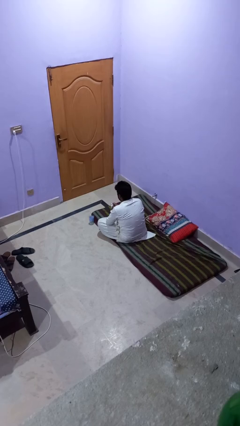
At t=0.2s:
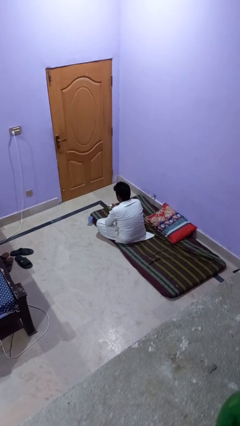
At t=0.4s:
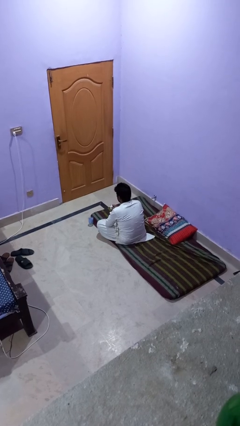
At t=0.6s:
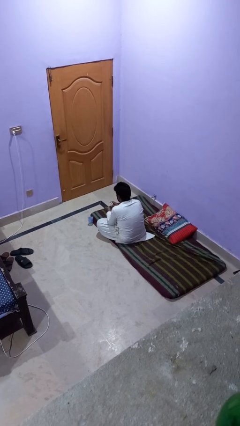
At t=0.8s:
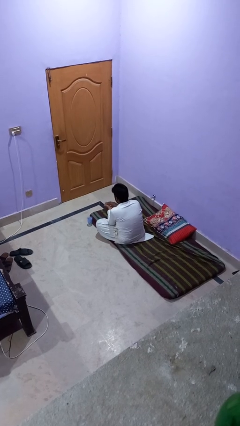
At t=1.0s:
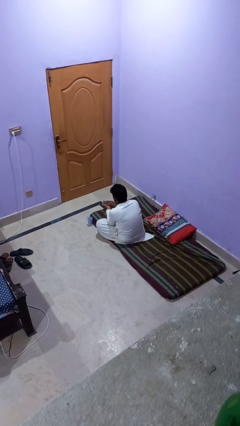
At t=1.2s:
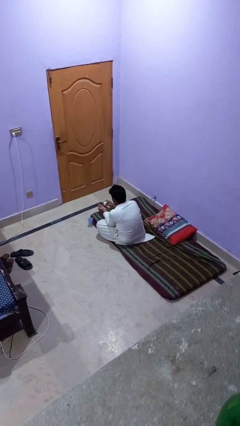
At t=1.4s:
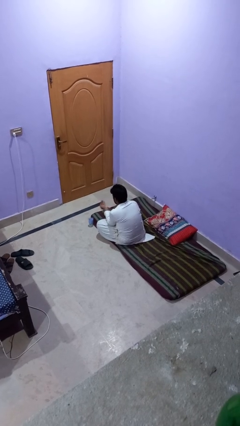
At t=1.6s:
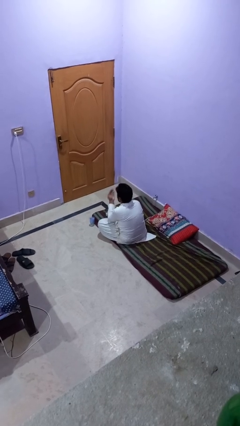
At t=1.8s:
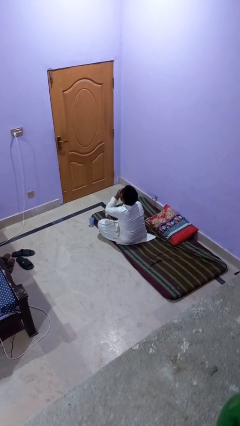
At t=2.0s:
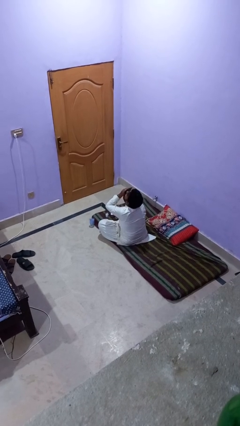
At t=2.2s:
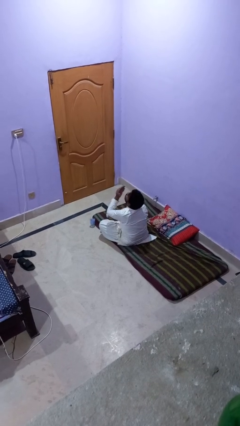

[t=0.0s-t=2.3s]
person takes medicine pills

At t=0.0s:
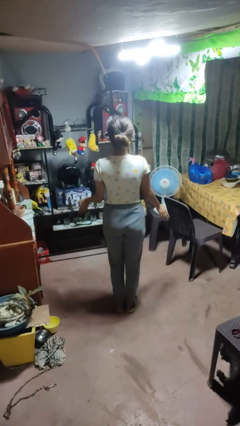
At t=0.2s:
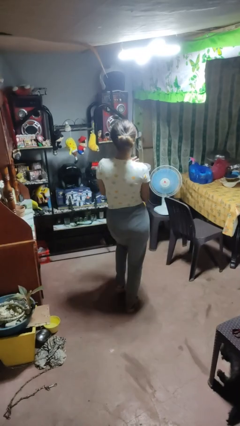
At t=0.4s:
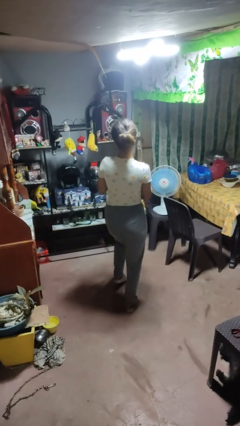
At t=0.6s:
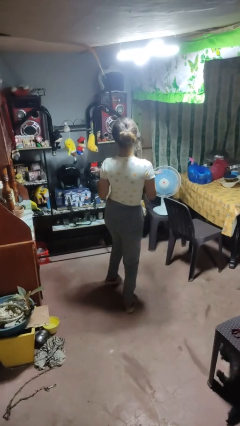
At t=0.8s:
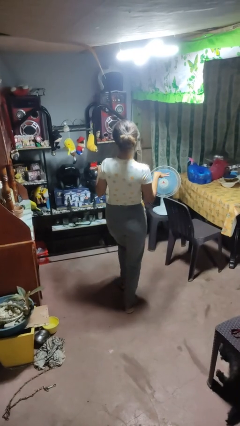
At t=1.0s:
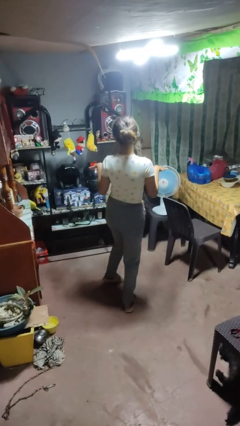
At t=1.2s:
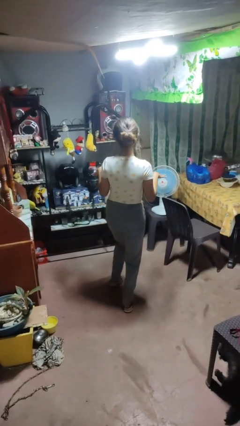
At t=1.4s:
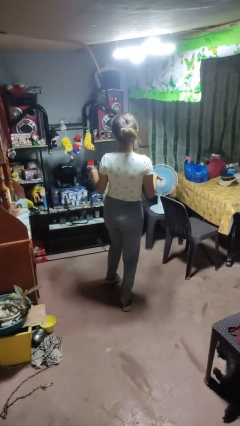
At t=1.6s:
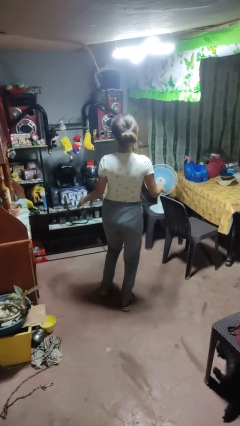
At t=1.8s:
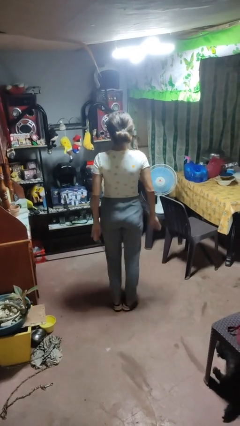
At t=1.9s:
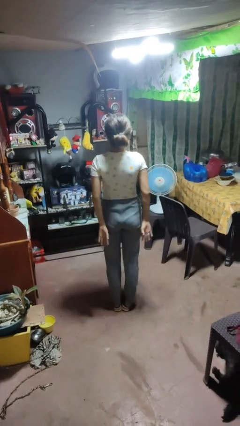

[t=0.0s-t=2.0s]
person dances in place

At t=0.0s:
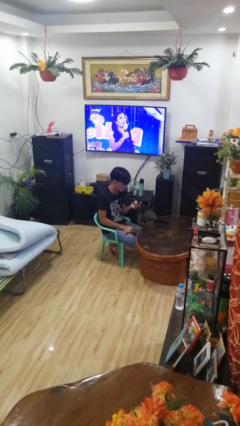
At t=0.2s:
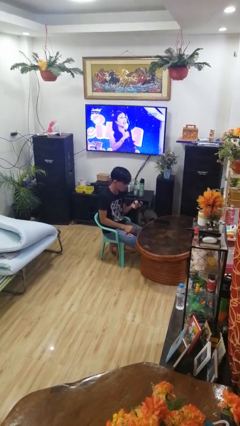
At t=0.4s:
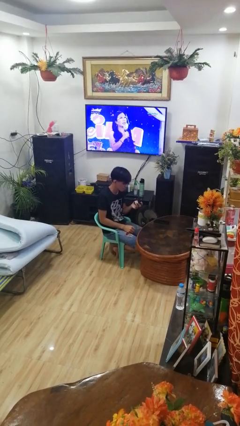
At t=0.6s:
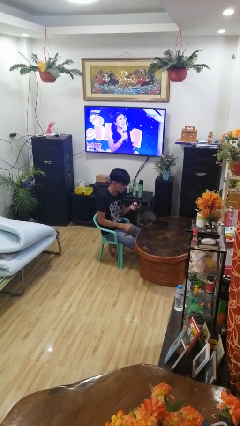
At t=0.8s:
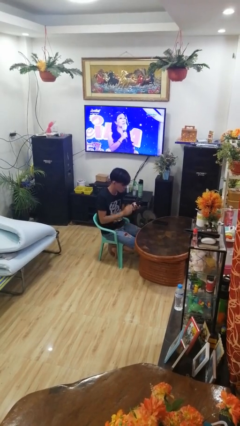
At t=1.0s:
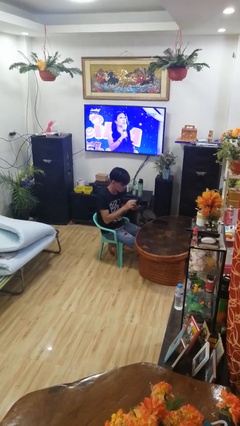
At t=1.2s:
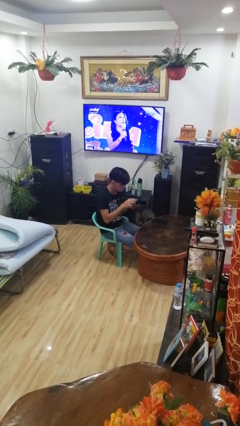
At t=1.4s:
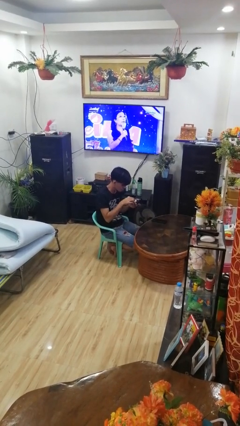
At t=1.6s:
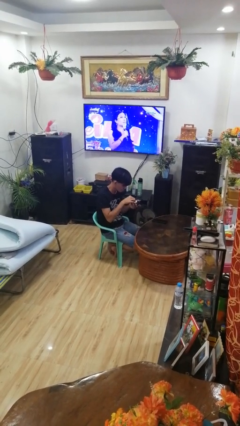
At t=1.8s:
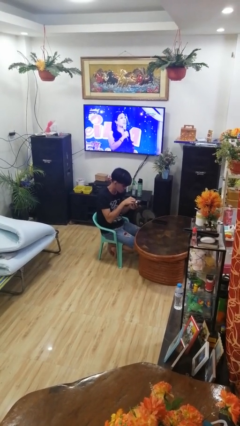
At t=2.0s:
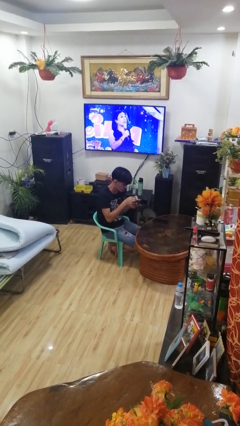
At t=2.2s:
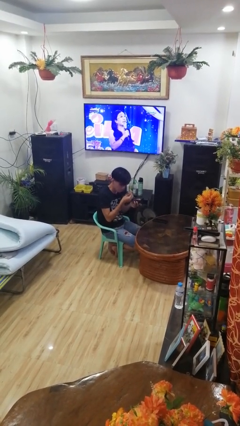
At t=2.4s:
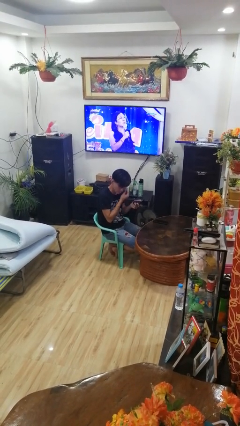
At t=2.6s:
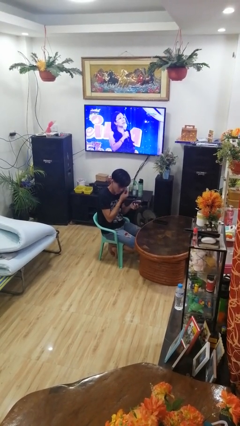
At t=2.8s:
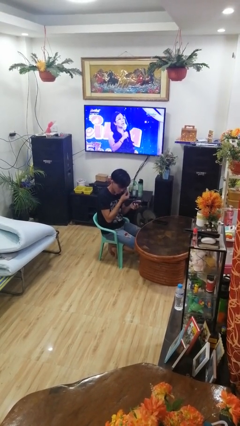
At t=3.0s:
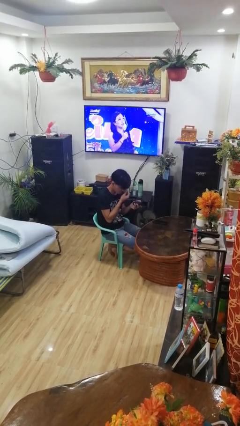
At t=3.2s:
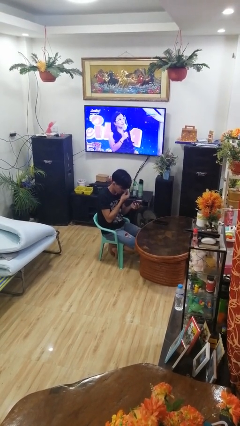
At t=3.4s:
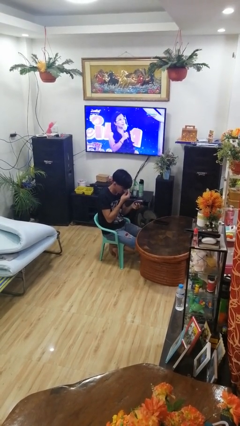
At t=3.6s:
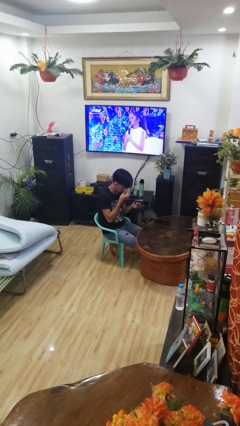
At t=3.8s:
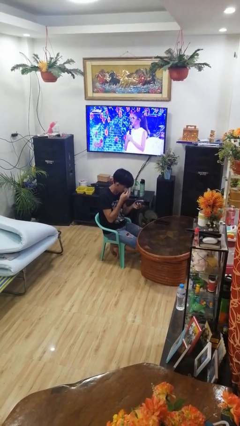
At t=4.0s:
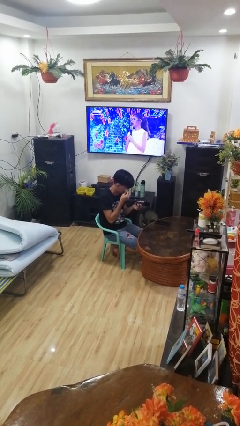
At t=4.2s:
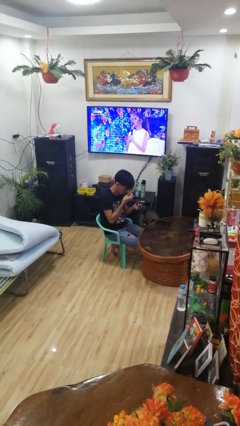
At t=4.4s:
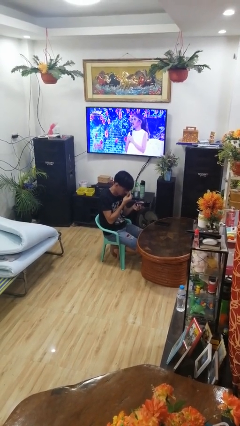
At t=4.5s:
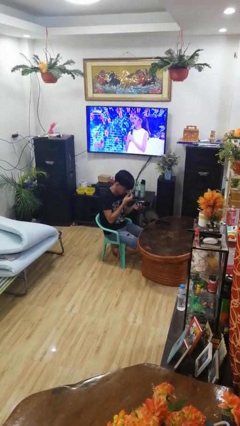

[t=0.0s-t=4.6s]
person applies foundation makeup

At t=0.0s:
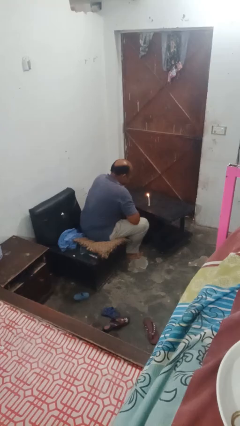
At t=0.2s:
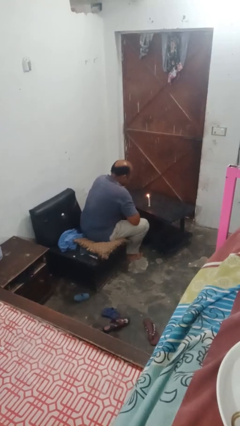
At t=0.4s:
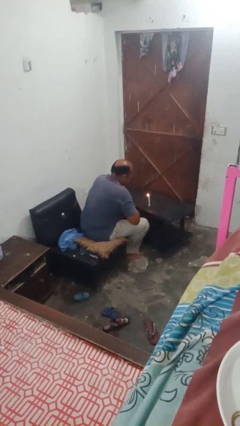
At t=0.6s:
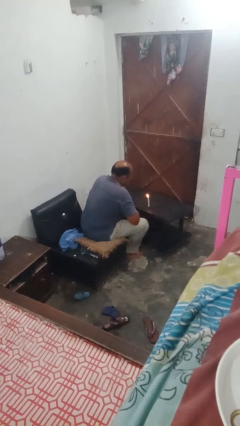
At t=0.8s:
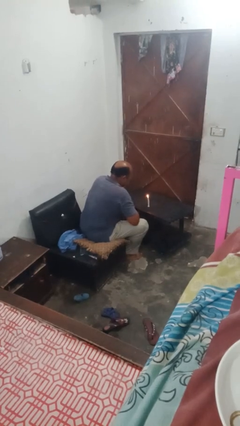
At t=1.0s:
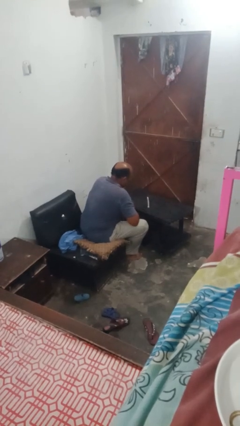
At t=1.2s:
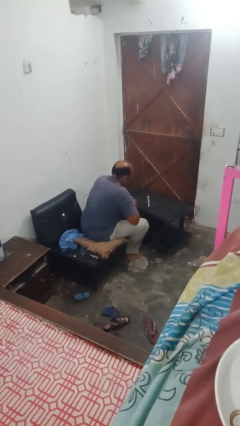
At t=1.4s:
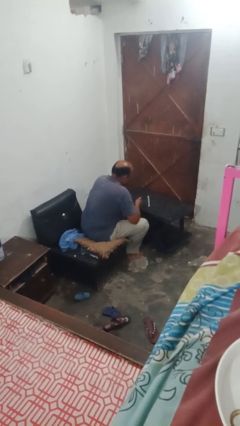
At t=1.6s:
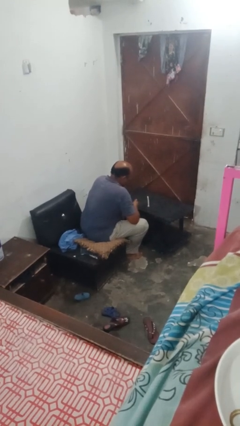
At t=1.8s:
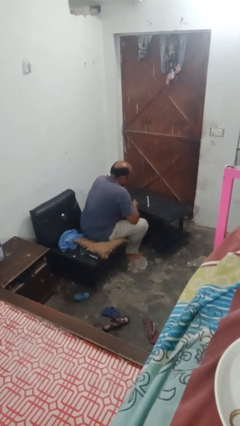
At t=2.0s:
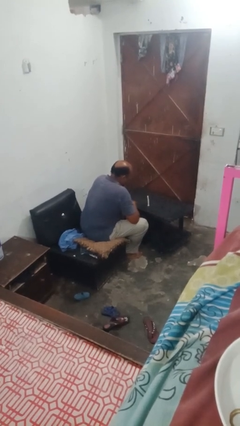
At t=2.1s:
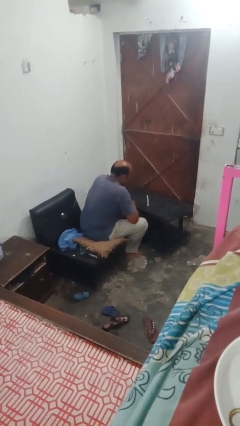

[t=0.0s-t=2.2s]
person extinguishes candle

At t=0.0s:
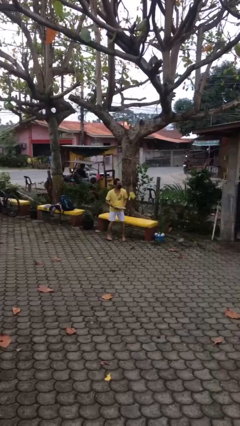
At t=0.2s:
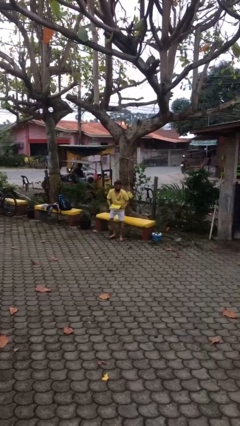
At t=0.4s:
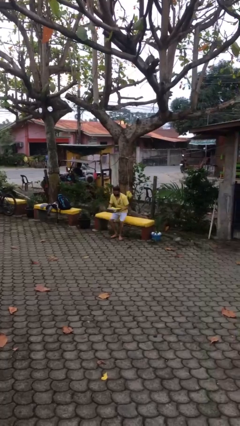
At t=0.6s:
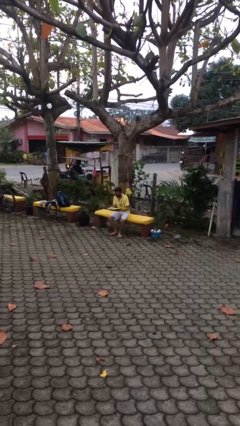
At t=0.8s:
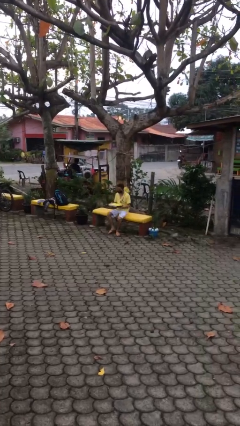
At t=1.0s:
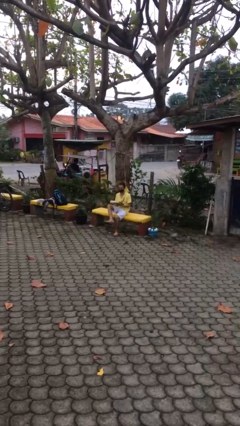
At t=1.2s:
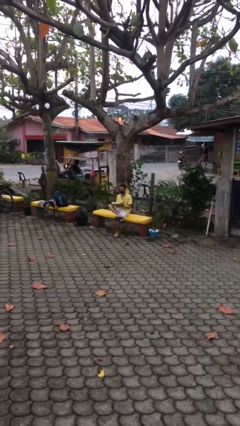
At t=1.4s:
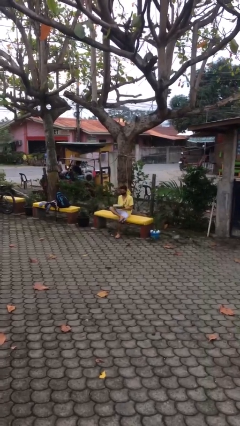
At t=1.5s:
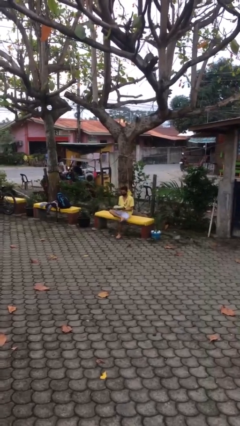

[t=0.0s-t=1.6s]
person sits down

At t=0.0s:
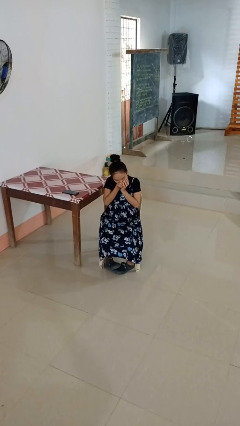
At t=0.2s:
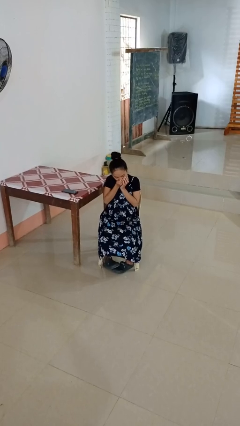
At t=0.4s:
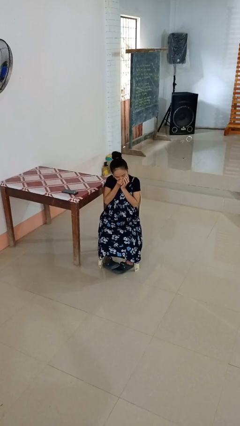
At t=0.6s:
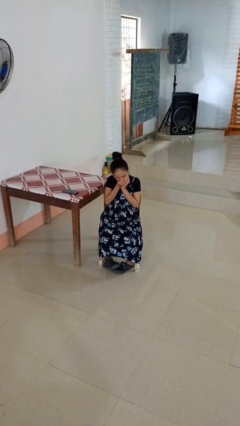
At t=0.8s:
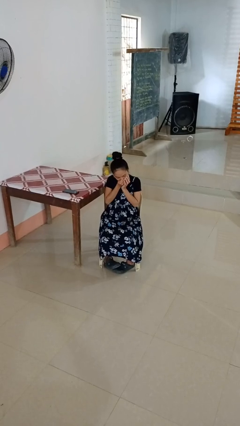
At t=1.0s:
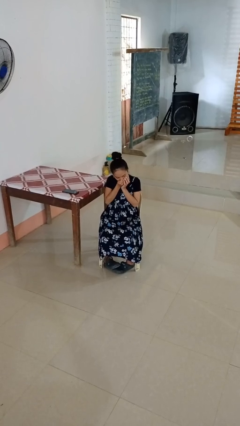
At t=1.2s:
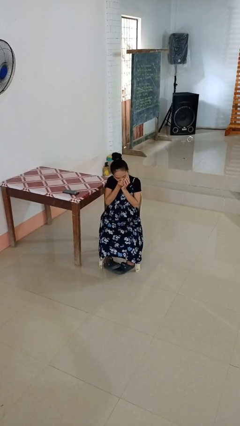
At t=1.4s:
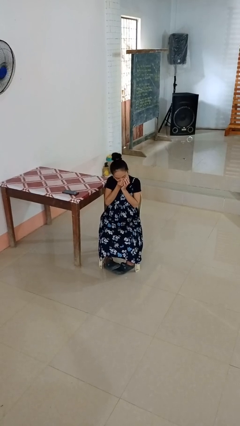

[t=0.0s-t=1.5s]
person sneezes into hand

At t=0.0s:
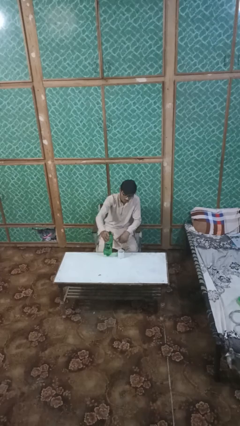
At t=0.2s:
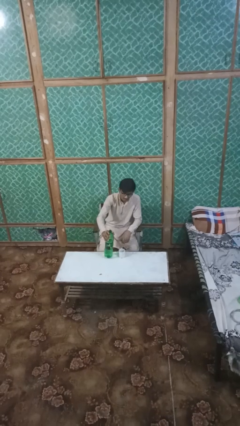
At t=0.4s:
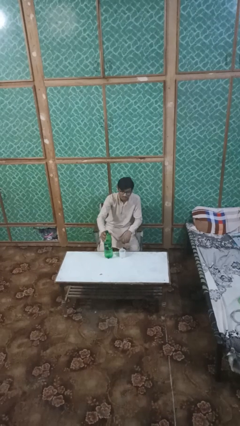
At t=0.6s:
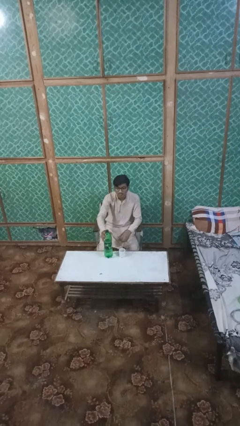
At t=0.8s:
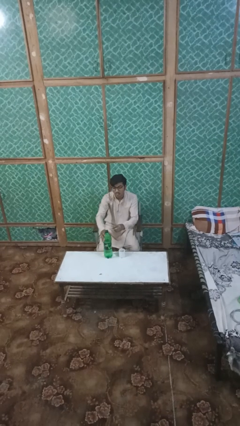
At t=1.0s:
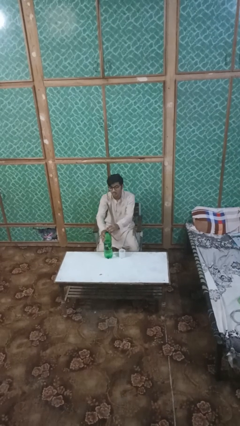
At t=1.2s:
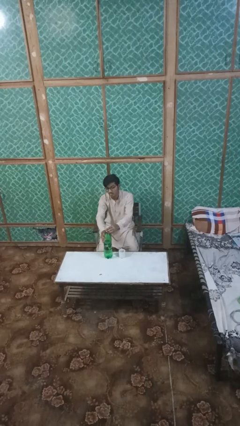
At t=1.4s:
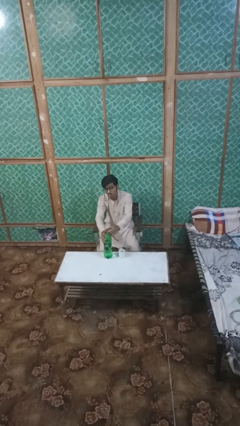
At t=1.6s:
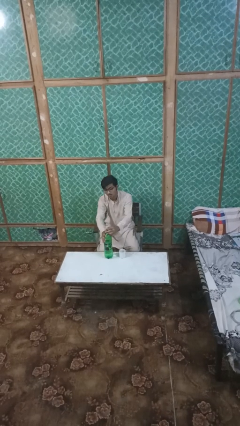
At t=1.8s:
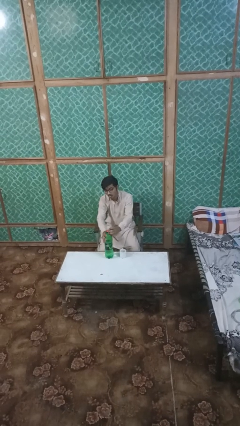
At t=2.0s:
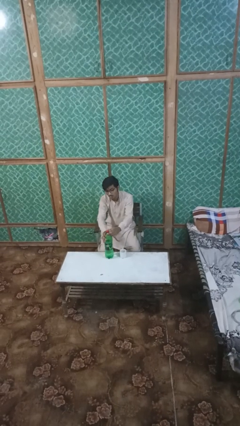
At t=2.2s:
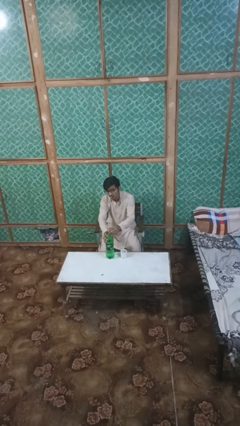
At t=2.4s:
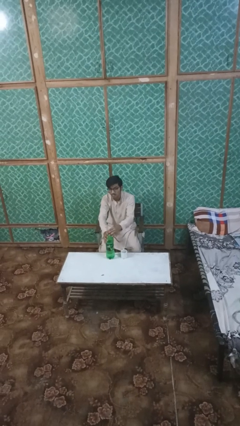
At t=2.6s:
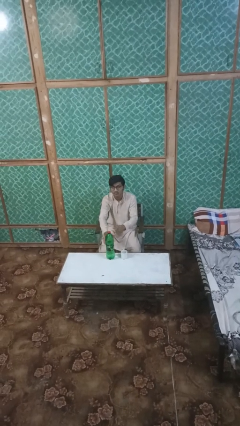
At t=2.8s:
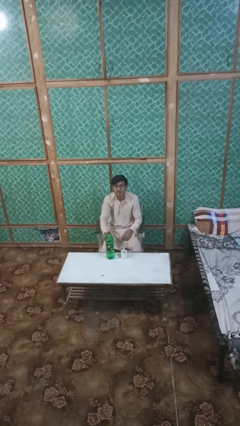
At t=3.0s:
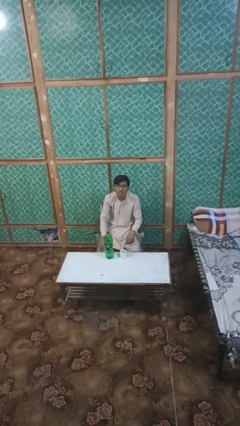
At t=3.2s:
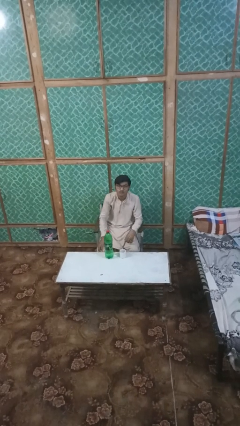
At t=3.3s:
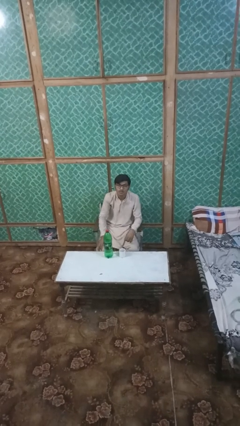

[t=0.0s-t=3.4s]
person screws lid to bottle
